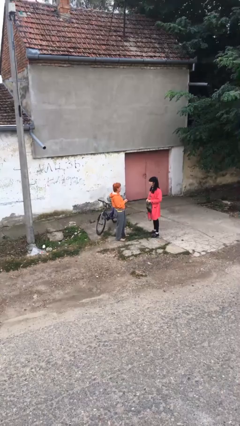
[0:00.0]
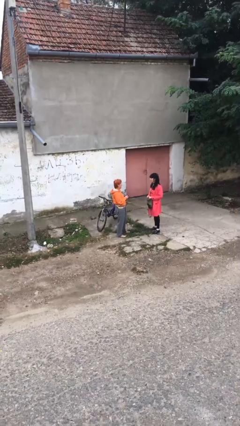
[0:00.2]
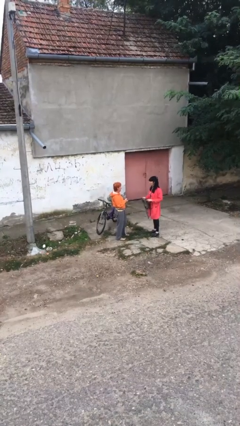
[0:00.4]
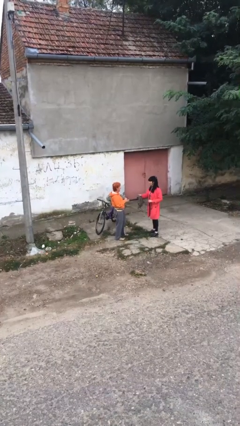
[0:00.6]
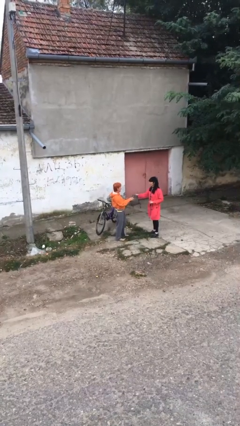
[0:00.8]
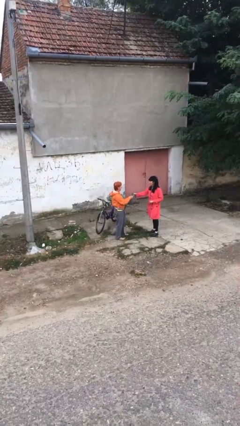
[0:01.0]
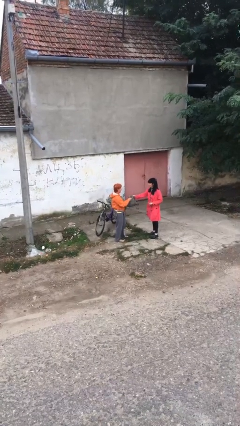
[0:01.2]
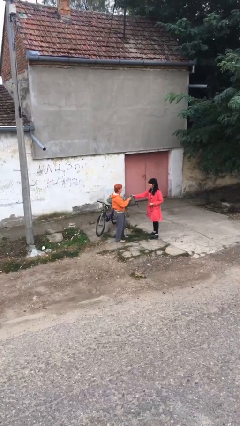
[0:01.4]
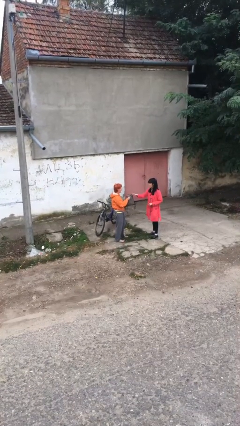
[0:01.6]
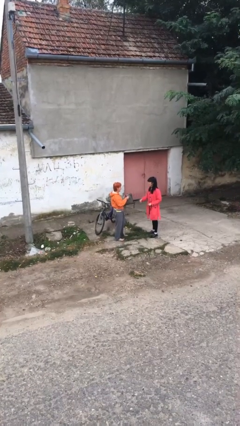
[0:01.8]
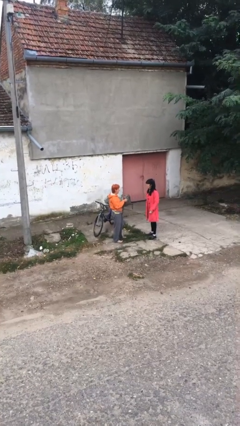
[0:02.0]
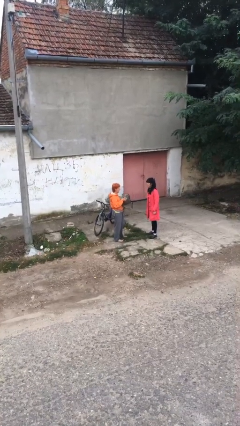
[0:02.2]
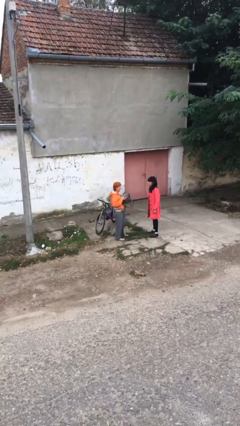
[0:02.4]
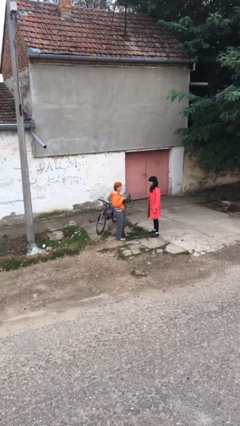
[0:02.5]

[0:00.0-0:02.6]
person transfers object to person

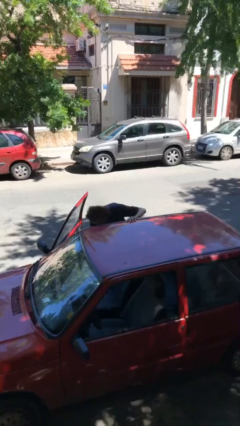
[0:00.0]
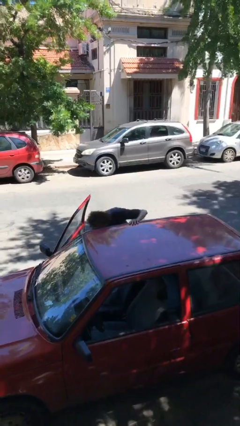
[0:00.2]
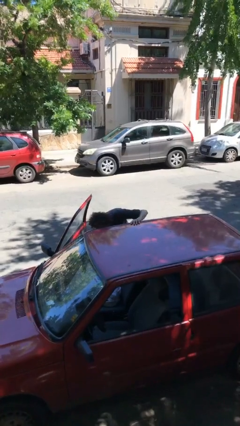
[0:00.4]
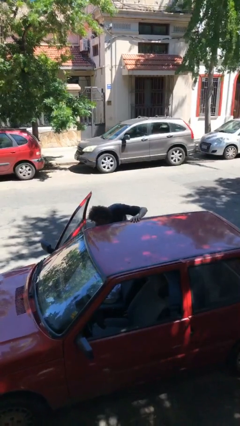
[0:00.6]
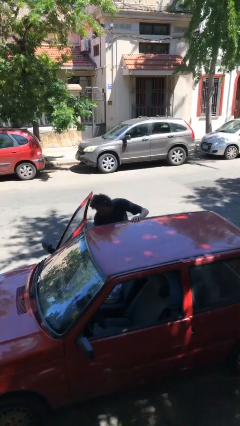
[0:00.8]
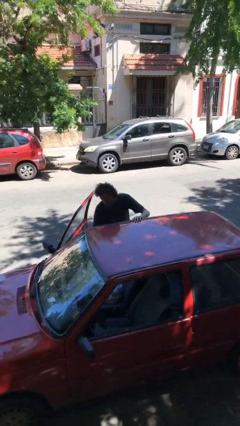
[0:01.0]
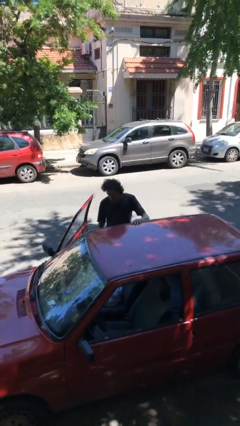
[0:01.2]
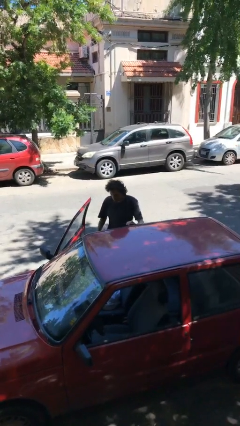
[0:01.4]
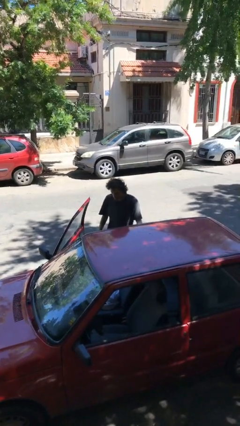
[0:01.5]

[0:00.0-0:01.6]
person loads car

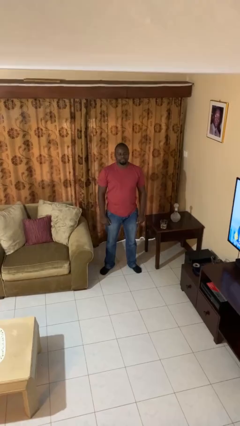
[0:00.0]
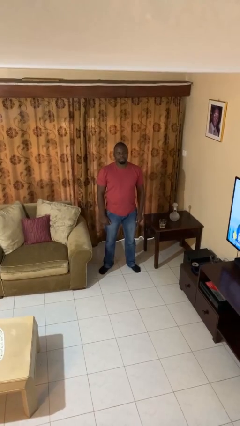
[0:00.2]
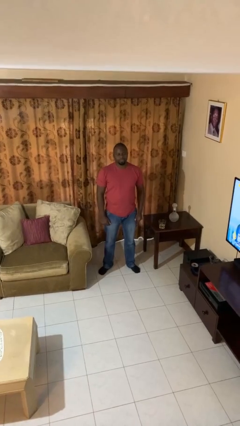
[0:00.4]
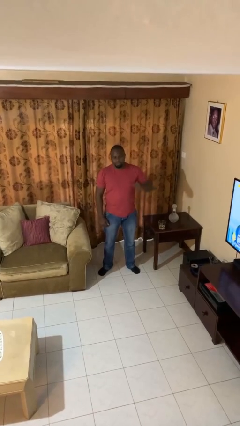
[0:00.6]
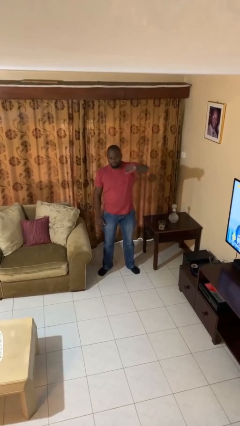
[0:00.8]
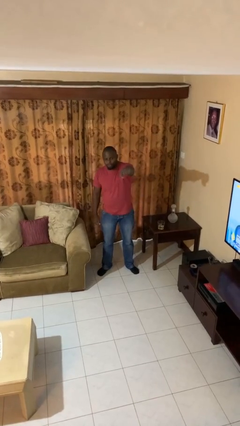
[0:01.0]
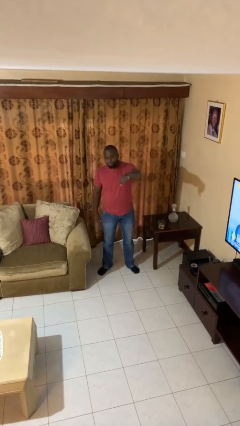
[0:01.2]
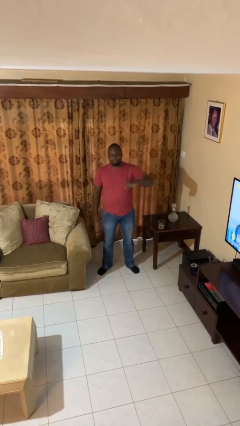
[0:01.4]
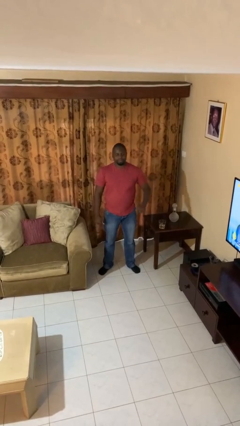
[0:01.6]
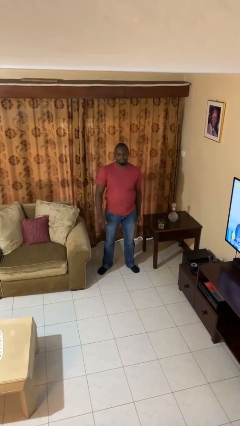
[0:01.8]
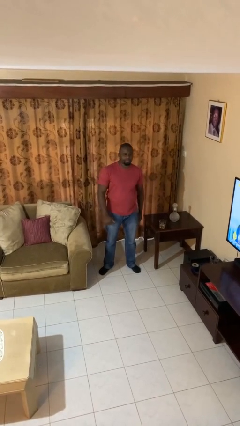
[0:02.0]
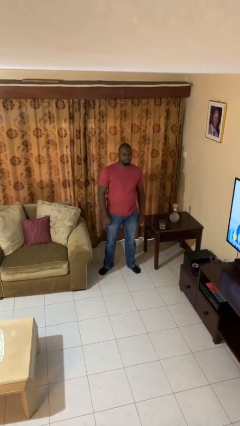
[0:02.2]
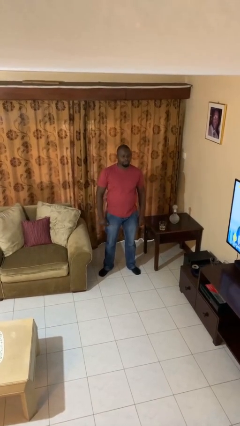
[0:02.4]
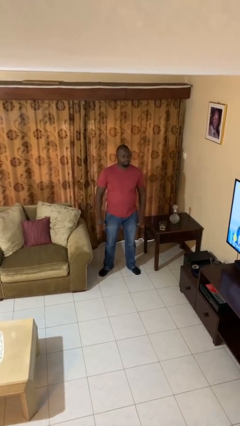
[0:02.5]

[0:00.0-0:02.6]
person punches

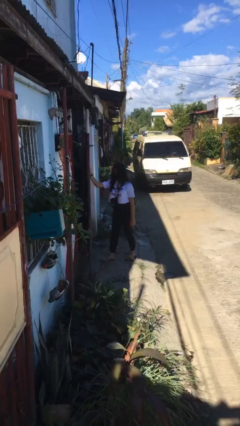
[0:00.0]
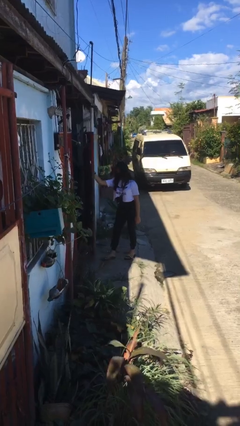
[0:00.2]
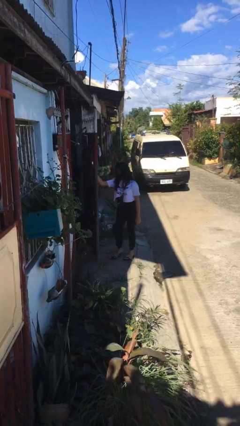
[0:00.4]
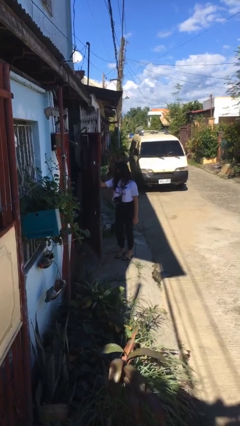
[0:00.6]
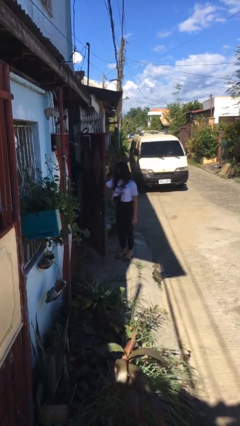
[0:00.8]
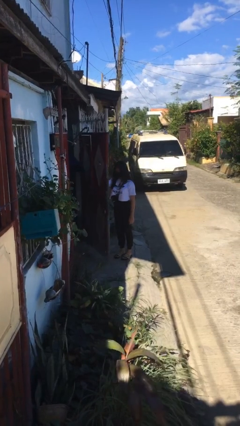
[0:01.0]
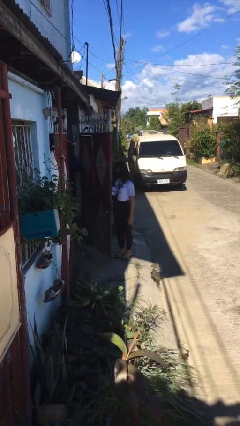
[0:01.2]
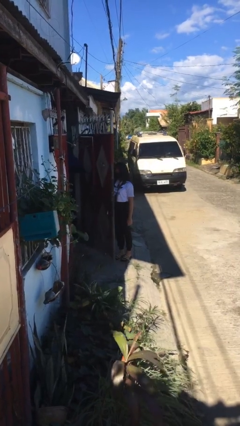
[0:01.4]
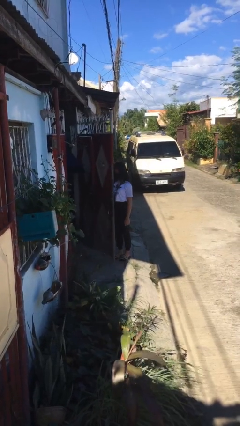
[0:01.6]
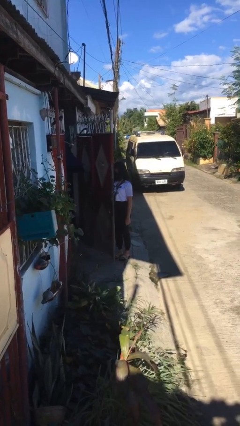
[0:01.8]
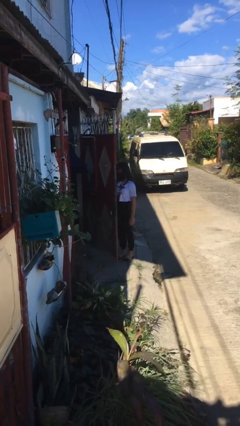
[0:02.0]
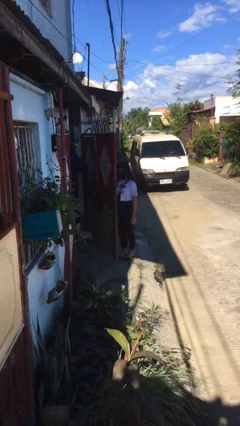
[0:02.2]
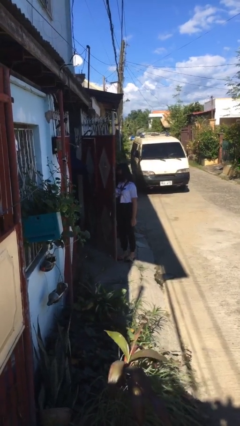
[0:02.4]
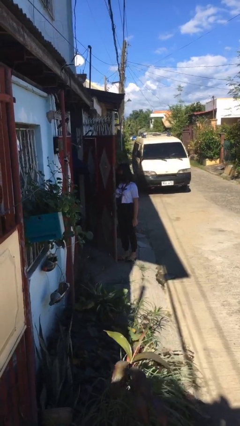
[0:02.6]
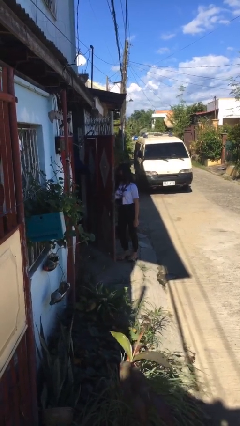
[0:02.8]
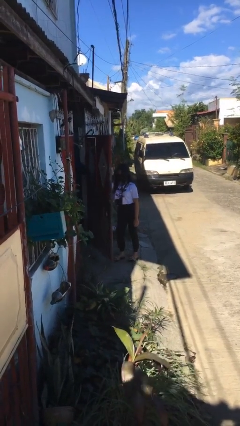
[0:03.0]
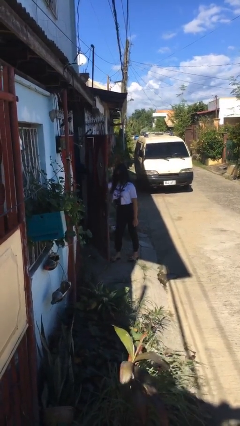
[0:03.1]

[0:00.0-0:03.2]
person opens gate

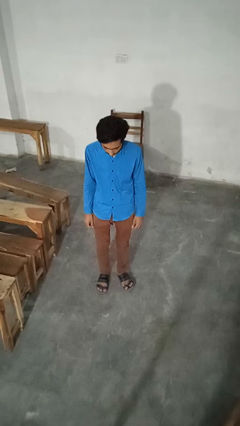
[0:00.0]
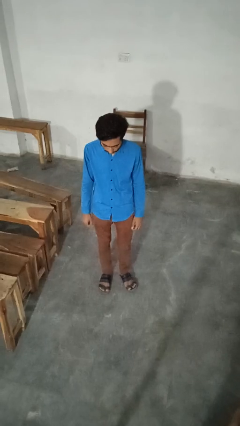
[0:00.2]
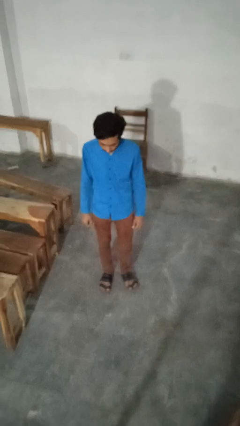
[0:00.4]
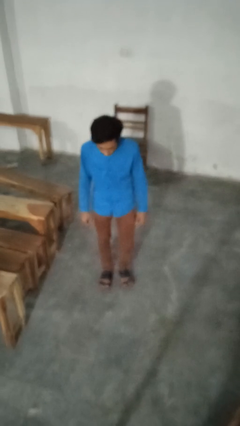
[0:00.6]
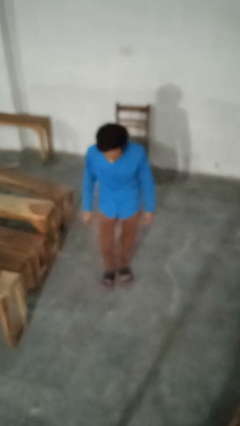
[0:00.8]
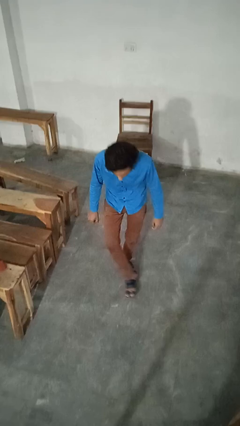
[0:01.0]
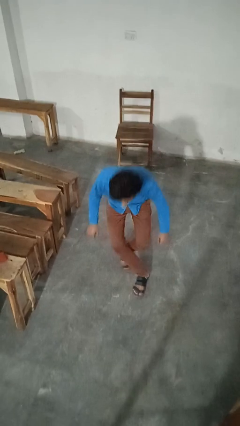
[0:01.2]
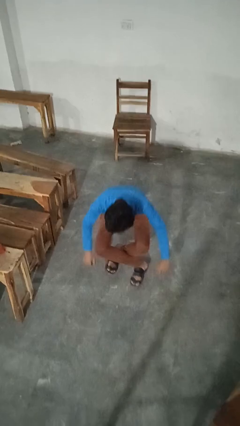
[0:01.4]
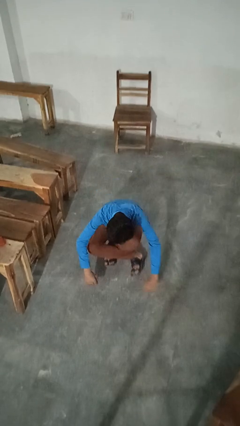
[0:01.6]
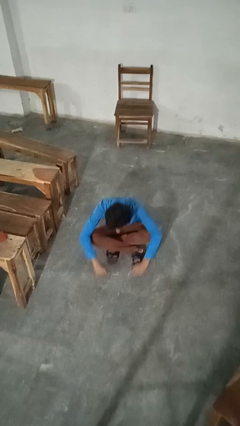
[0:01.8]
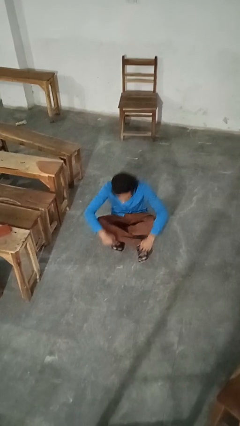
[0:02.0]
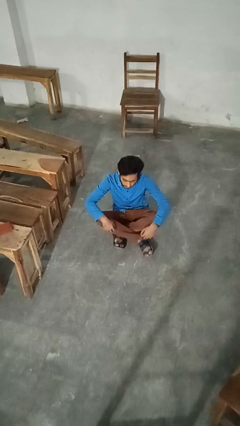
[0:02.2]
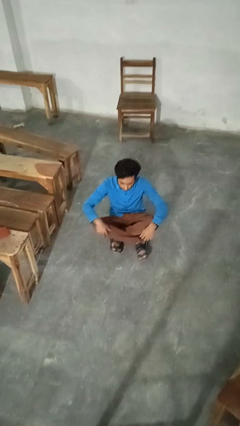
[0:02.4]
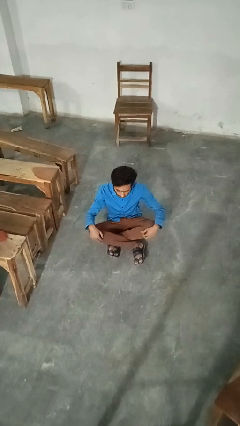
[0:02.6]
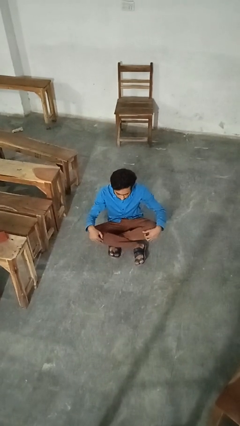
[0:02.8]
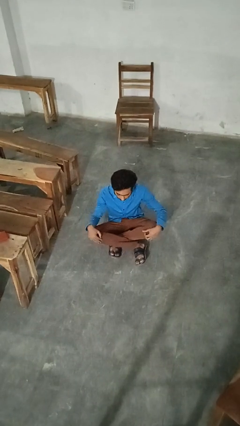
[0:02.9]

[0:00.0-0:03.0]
person sits crisscross

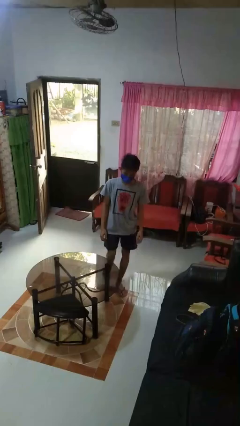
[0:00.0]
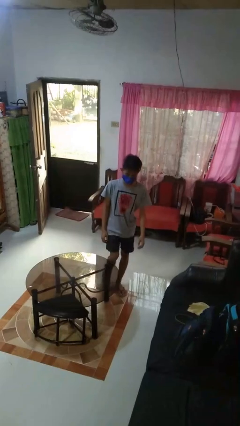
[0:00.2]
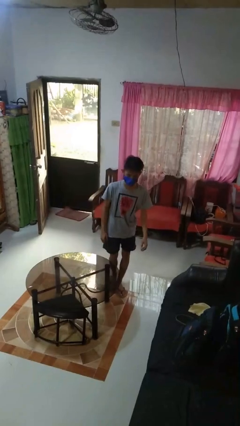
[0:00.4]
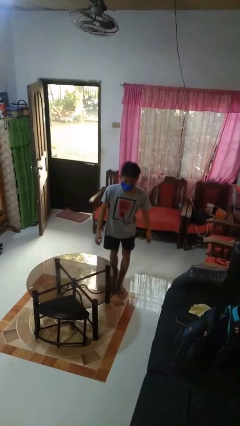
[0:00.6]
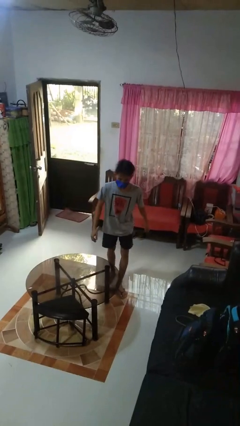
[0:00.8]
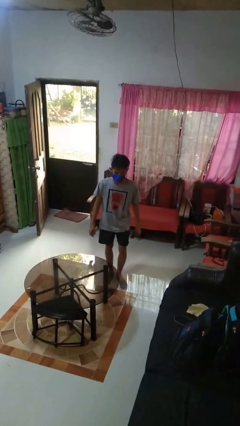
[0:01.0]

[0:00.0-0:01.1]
person bumps into table

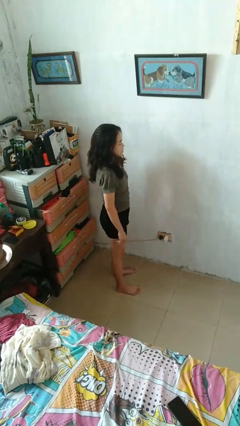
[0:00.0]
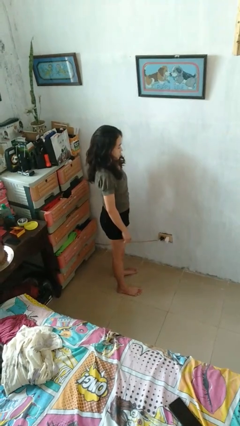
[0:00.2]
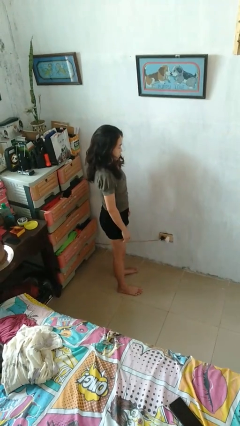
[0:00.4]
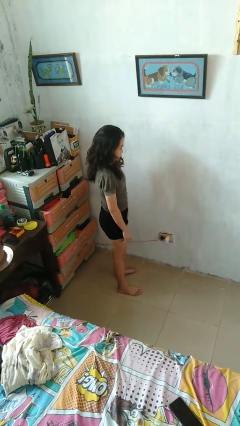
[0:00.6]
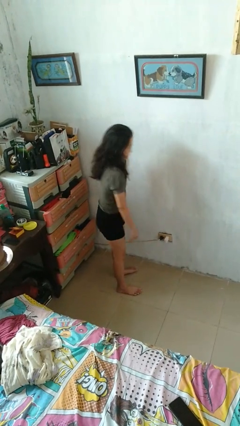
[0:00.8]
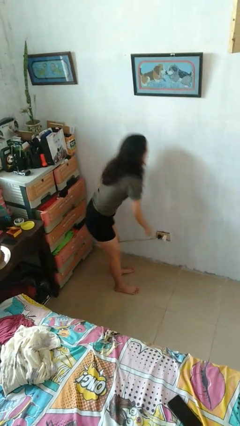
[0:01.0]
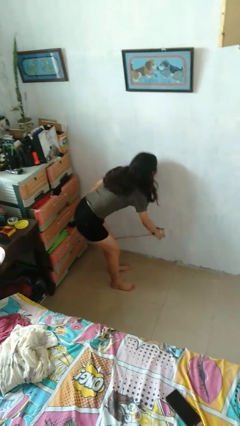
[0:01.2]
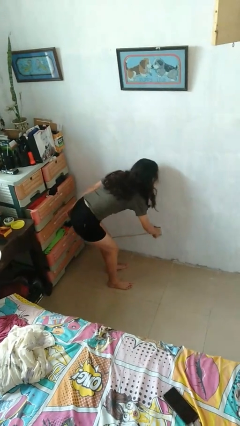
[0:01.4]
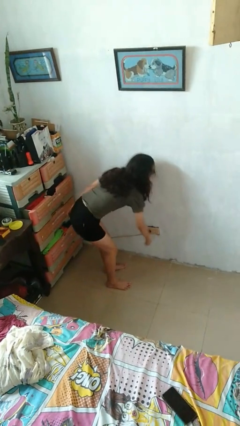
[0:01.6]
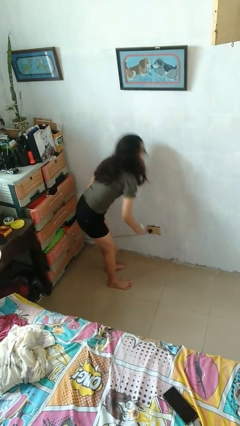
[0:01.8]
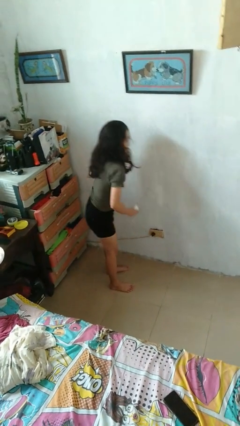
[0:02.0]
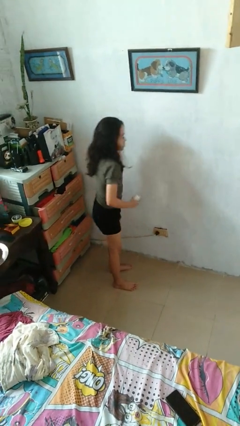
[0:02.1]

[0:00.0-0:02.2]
person unplugs from electrical socket

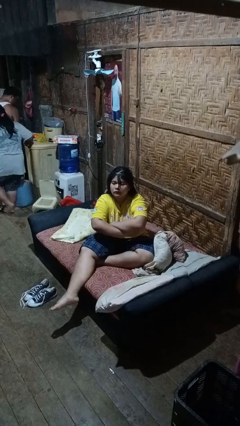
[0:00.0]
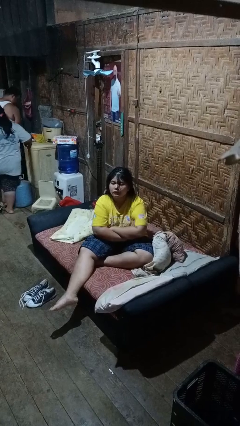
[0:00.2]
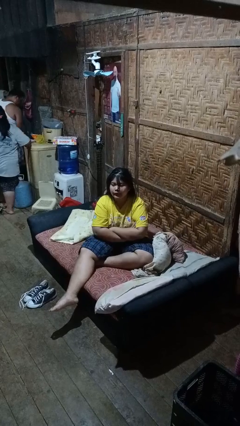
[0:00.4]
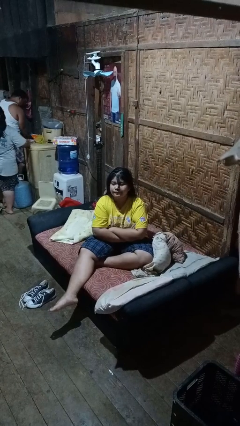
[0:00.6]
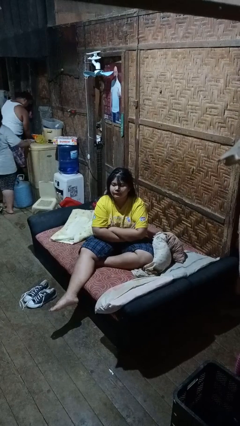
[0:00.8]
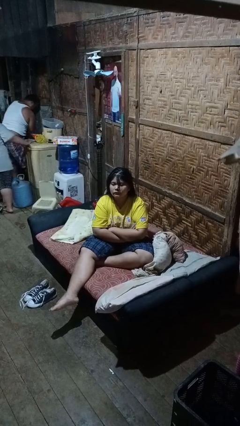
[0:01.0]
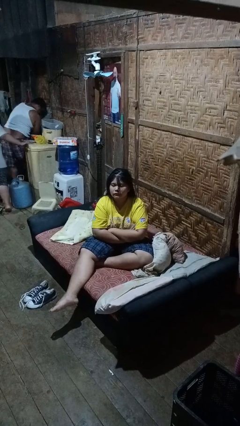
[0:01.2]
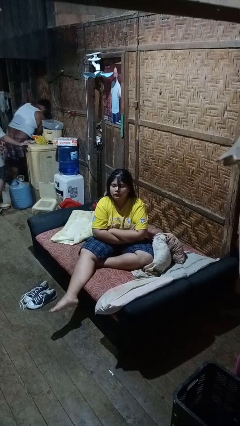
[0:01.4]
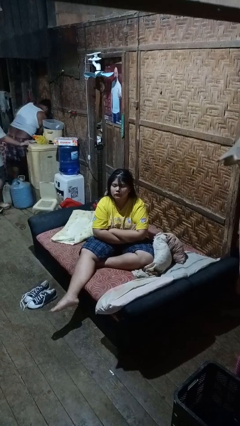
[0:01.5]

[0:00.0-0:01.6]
person gestures arms x
